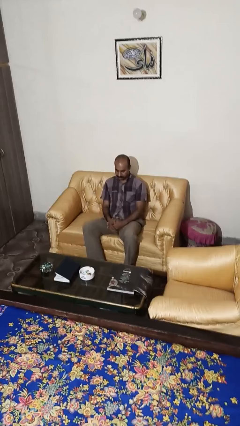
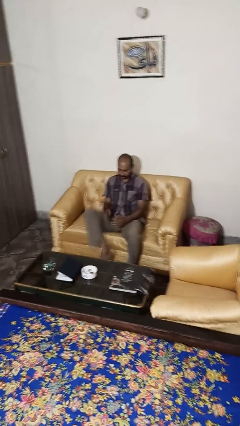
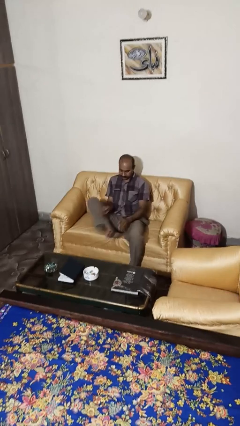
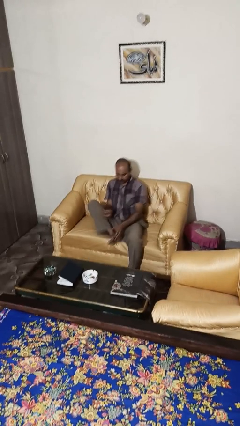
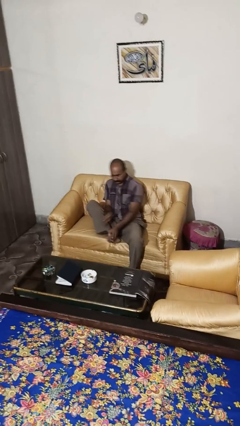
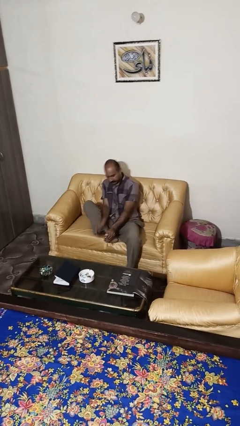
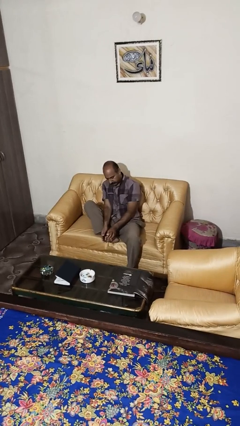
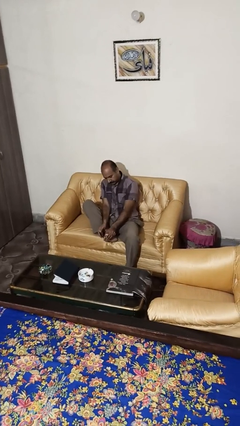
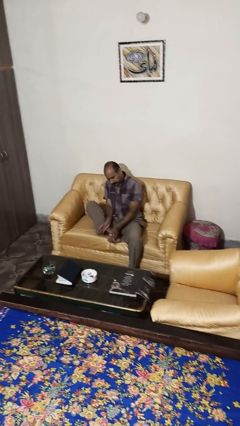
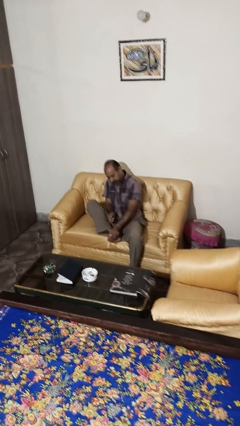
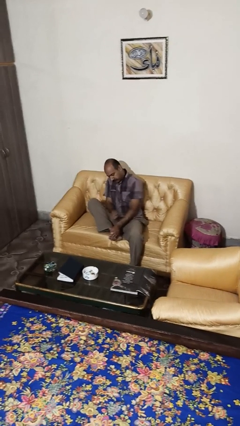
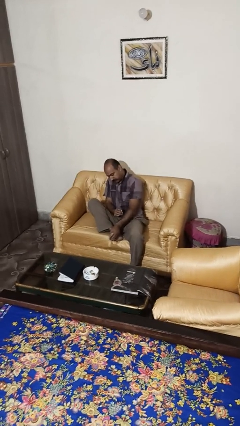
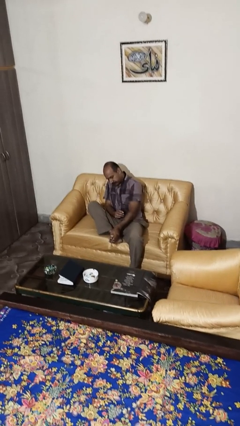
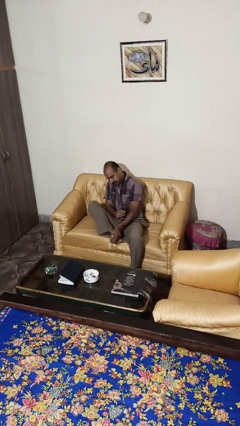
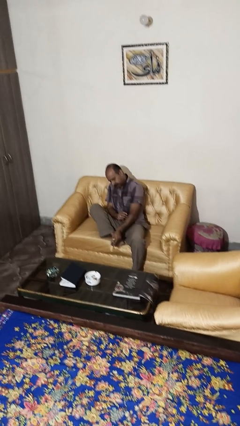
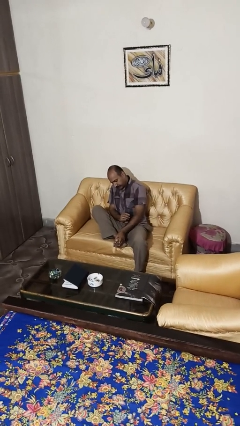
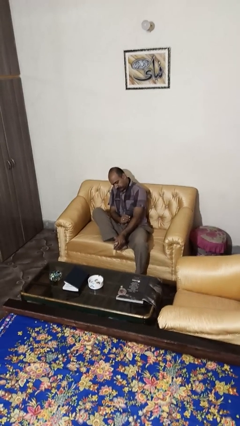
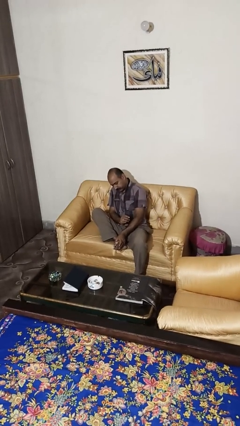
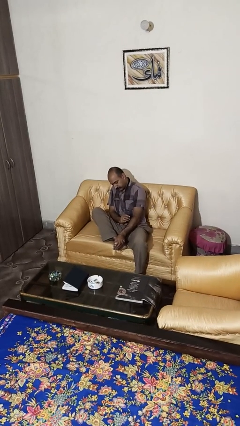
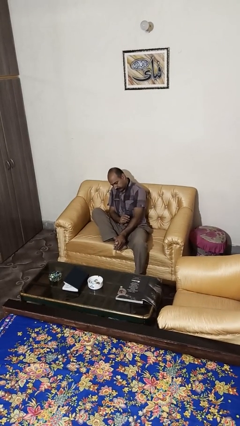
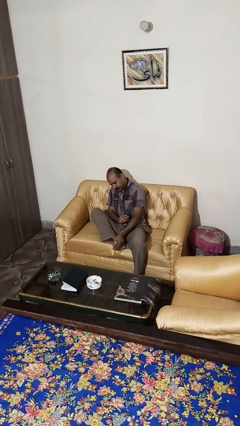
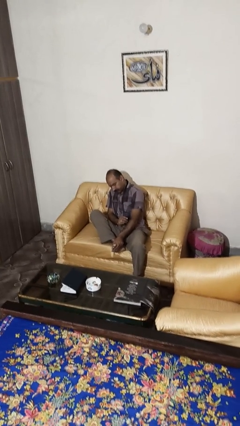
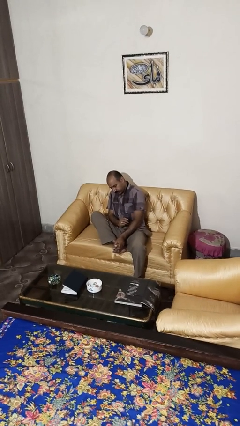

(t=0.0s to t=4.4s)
person rubs foot

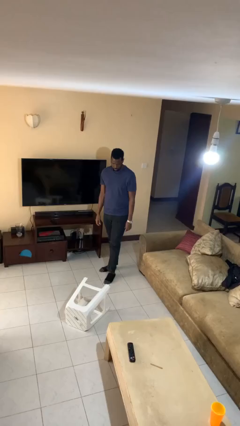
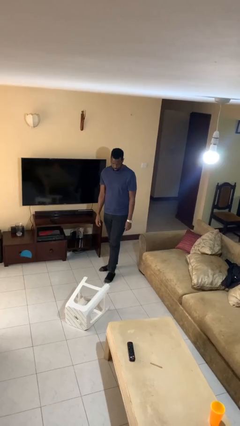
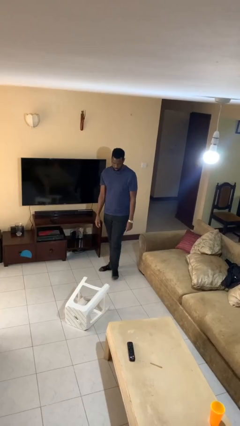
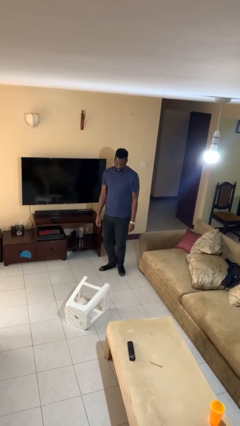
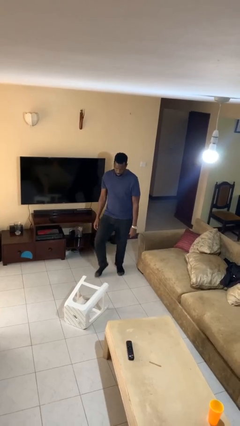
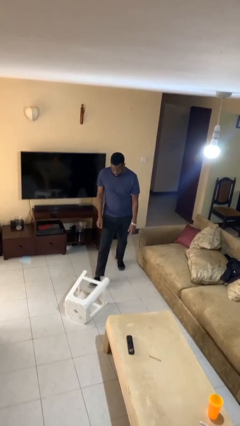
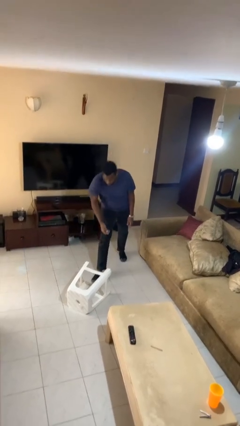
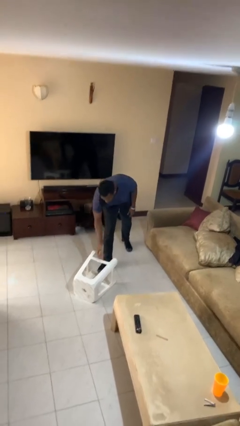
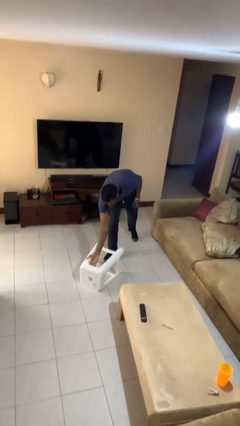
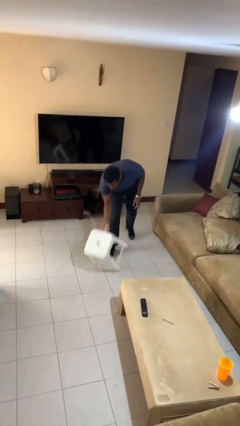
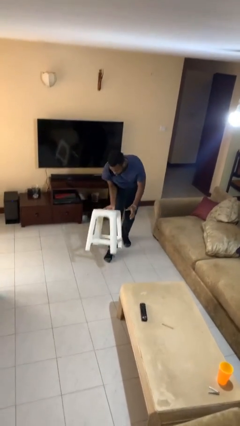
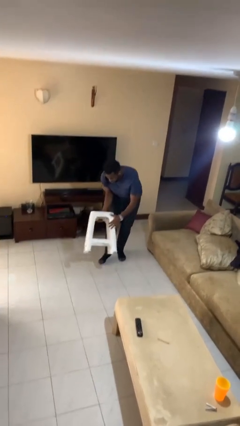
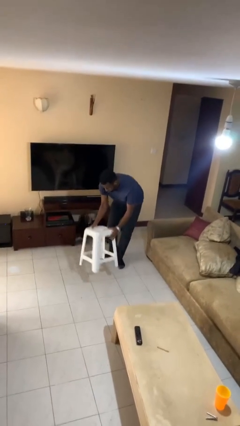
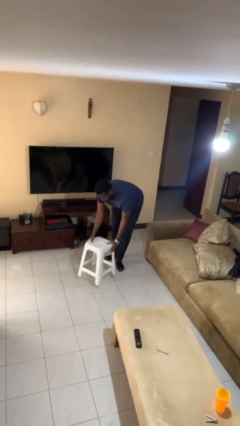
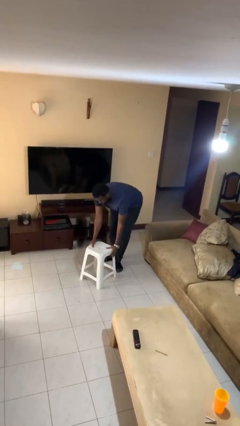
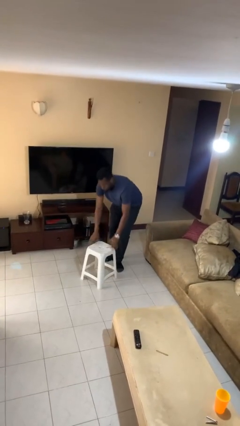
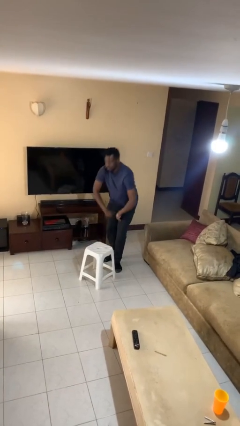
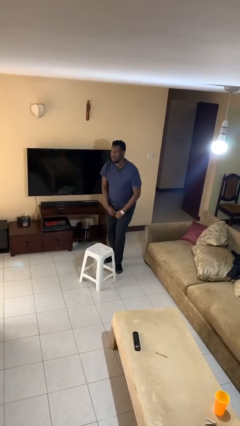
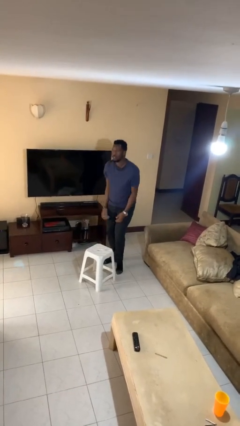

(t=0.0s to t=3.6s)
person sets upright furniture

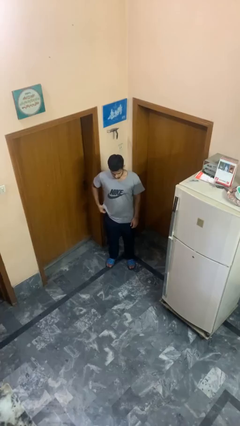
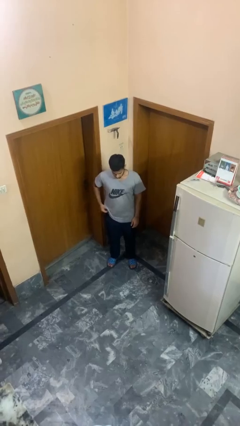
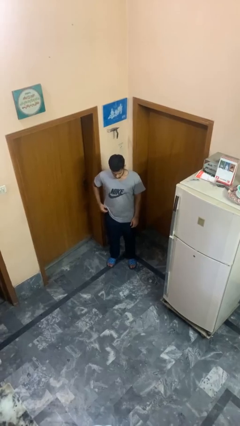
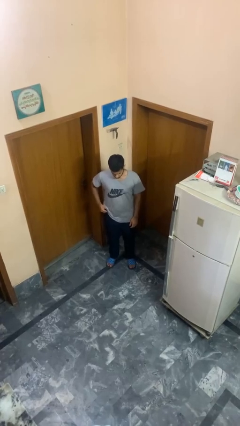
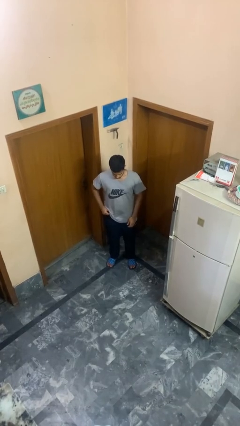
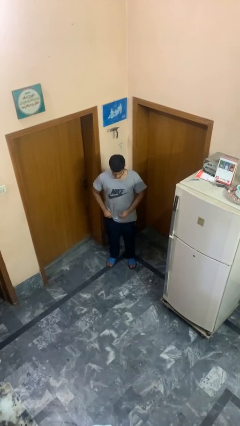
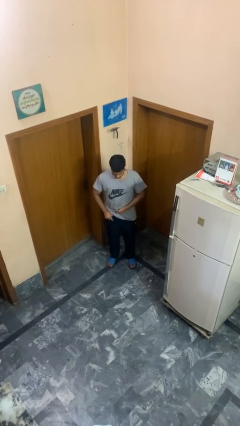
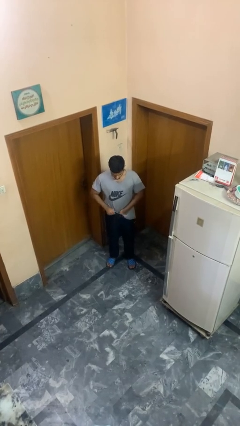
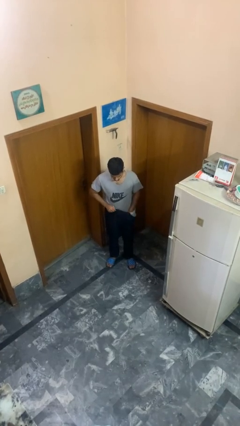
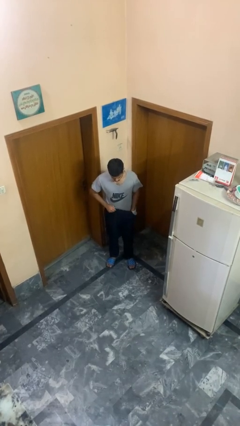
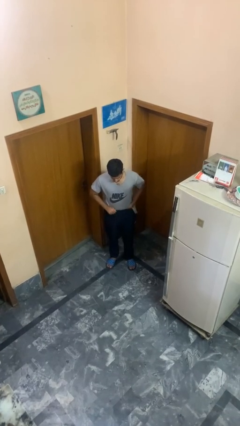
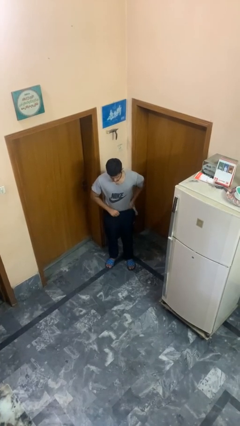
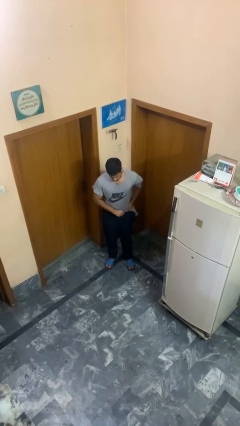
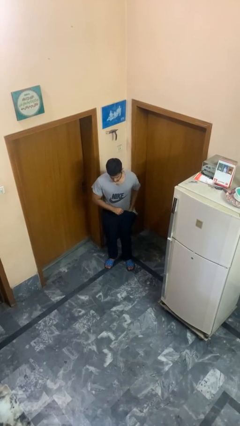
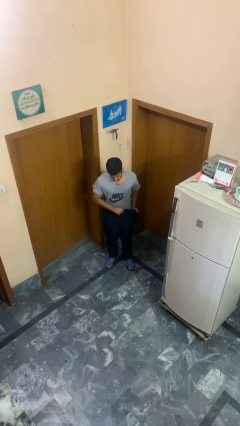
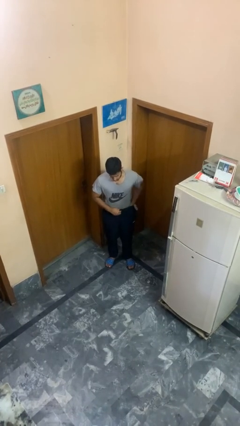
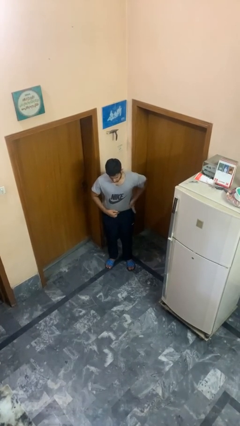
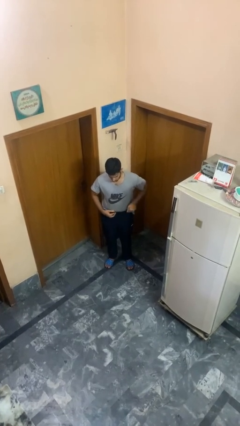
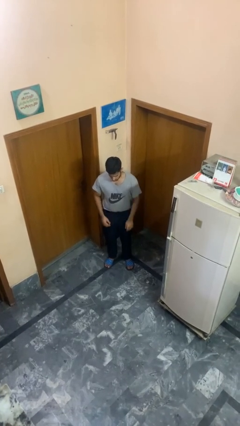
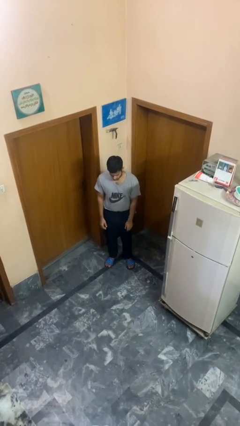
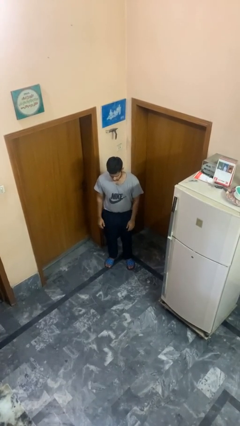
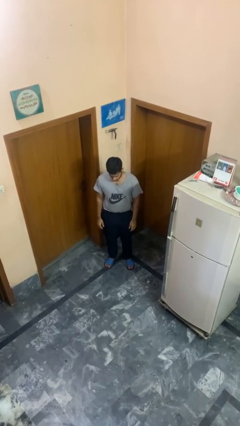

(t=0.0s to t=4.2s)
person tucks in shirt

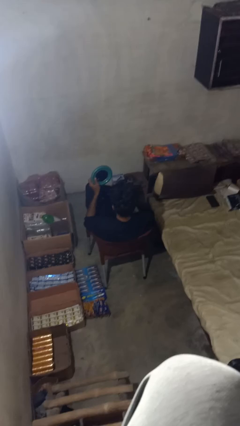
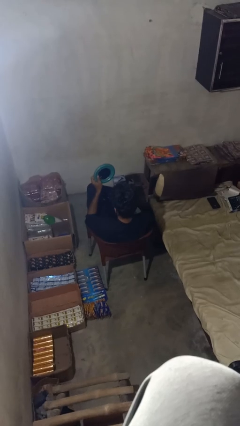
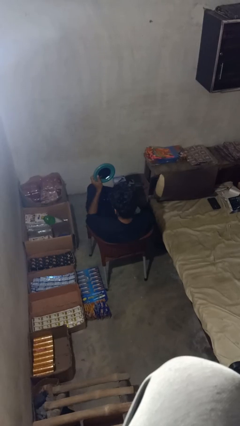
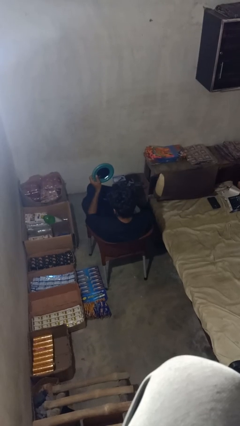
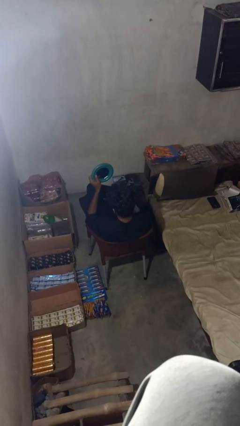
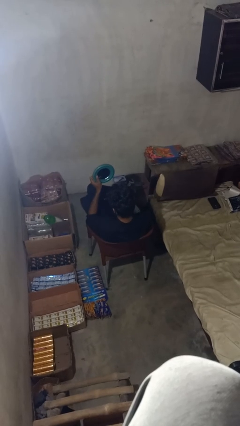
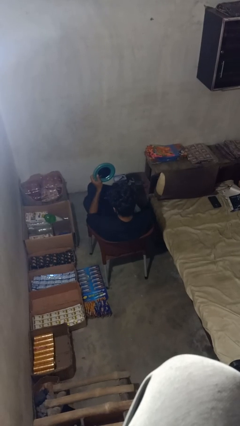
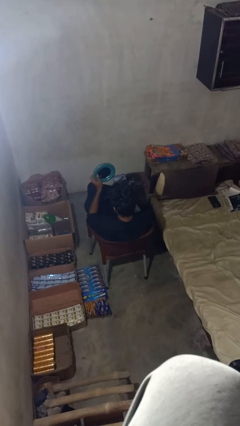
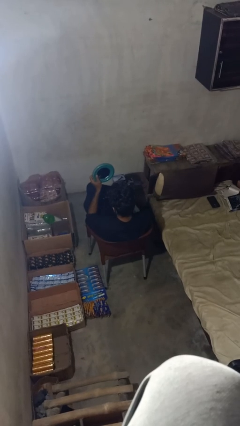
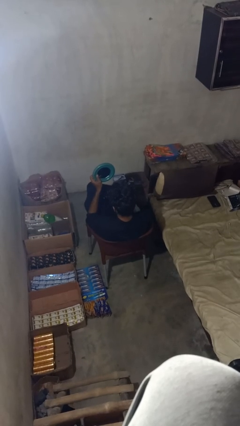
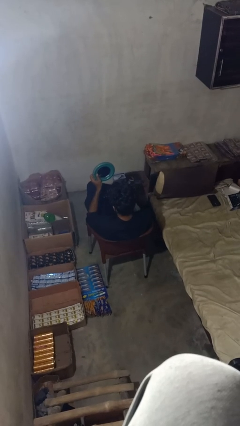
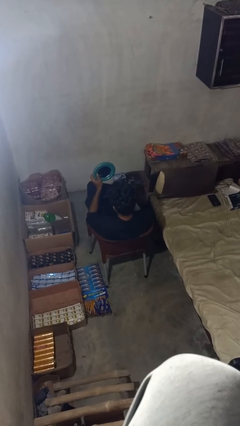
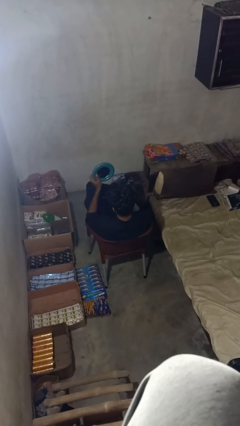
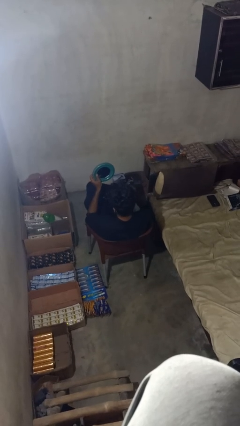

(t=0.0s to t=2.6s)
person applies eye makeup

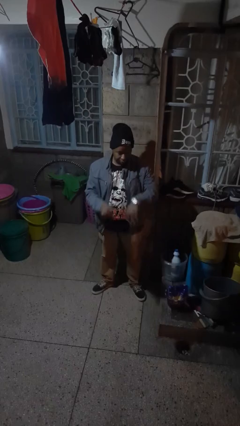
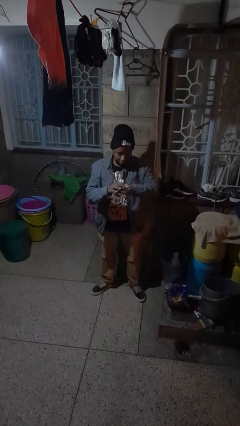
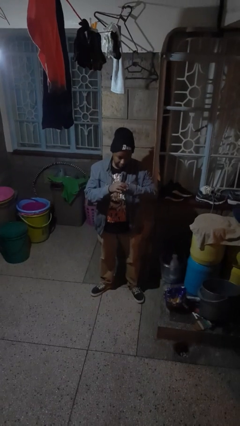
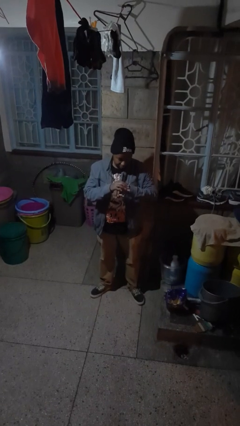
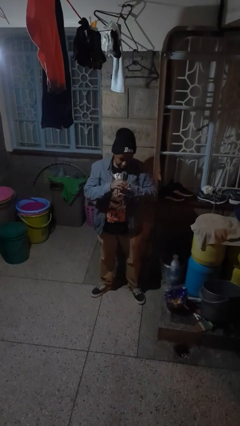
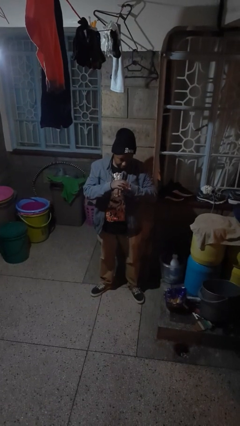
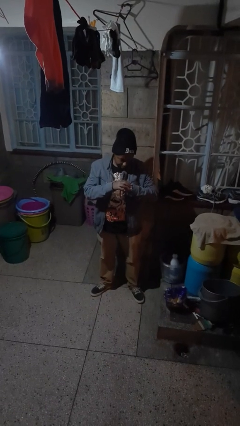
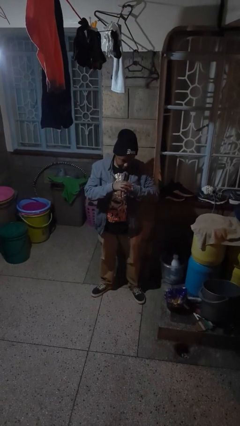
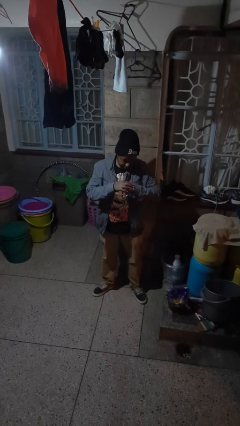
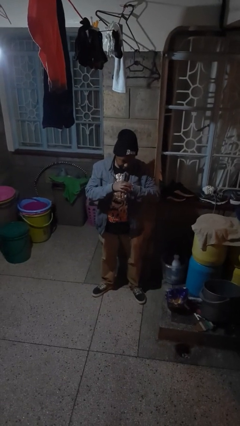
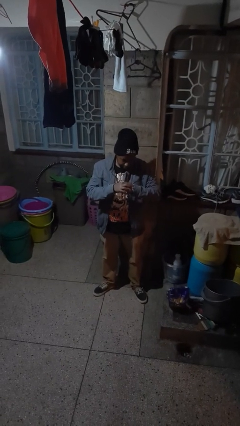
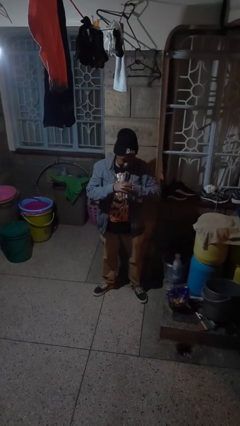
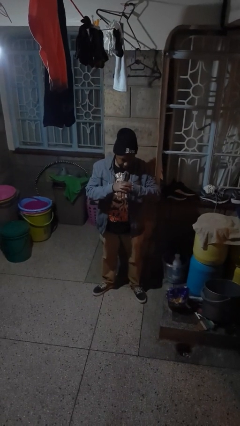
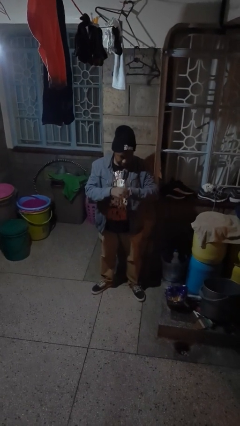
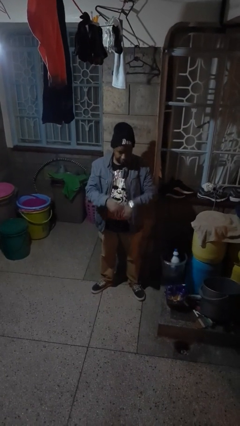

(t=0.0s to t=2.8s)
person looks at wristwatch
